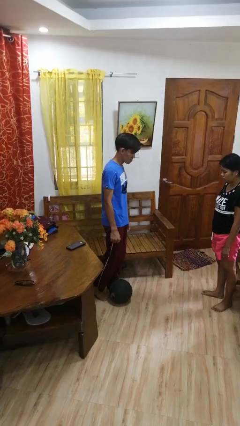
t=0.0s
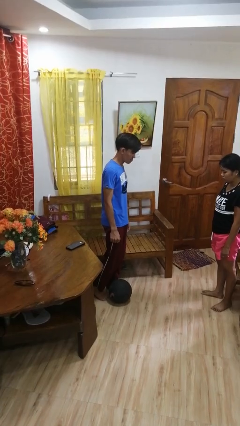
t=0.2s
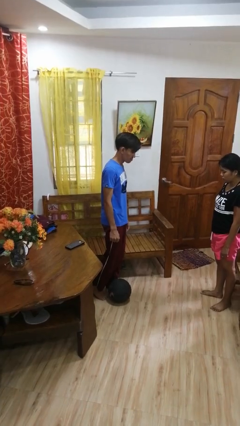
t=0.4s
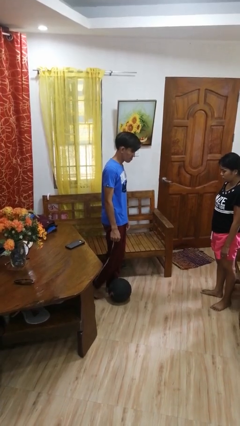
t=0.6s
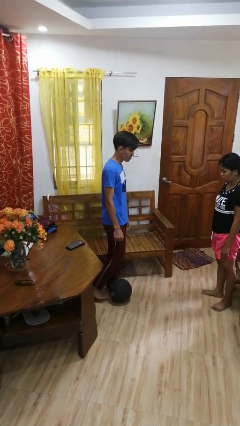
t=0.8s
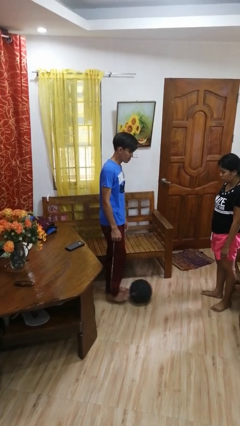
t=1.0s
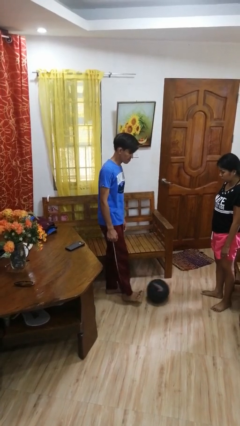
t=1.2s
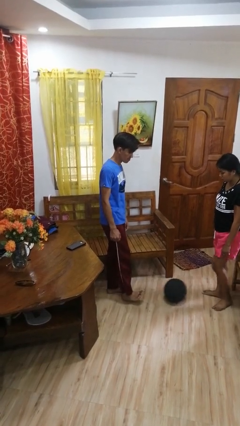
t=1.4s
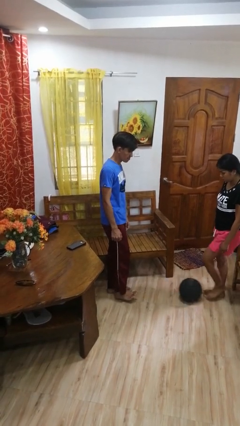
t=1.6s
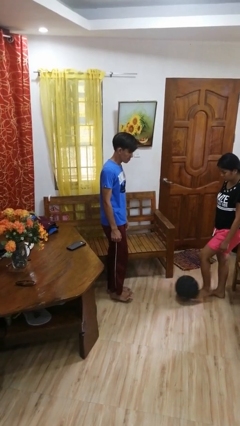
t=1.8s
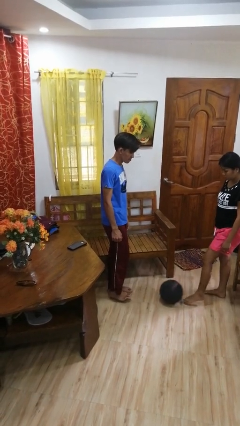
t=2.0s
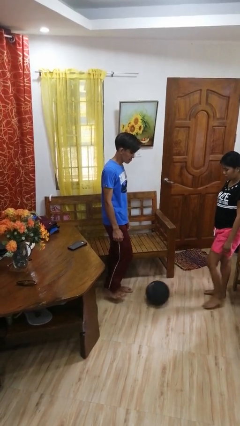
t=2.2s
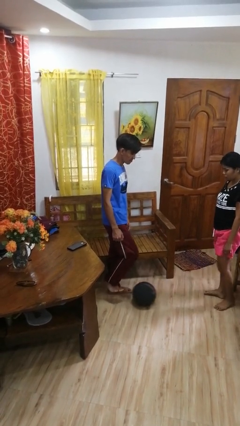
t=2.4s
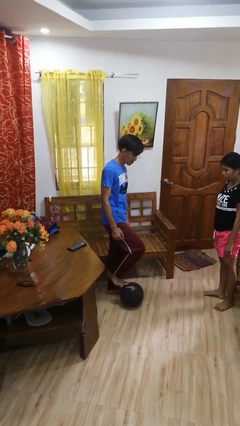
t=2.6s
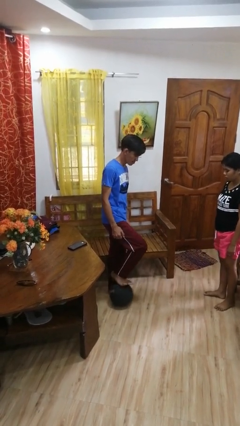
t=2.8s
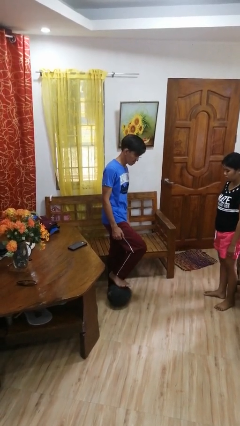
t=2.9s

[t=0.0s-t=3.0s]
person kicks object to person

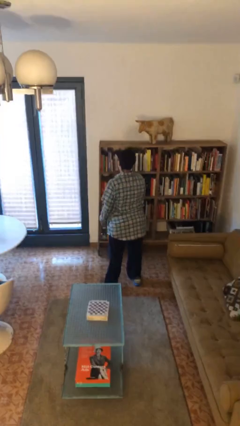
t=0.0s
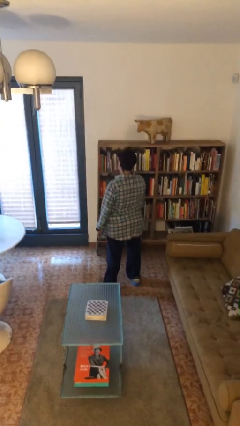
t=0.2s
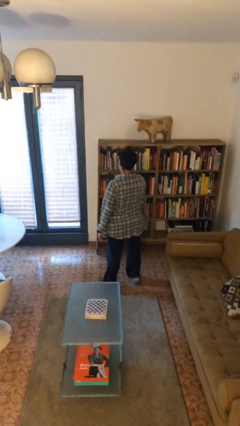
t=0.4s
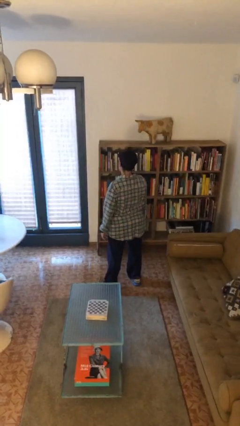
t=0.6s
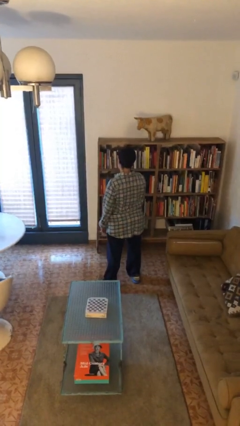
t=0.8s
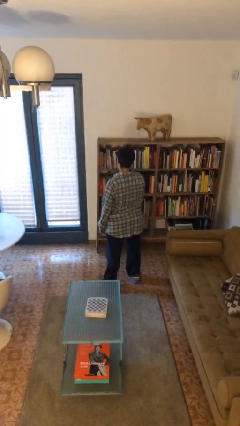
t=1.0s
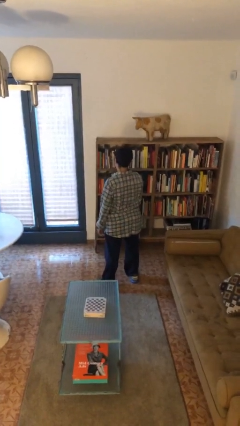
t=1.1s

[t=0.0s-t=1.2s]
person stands up

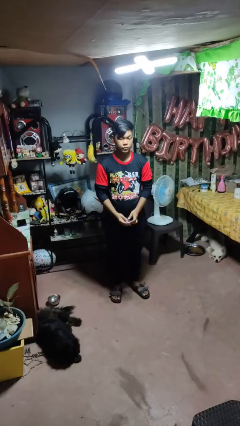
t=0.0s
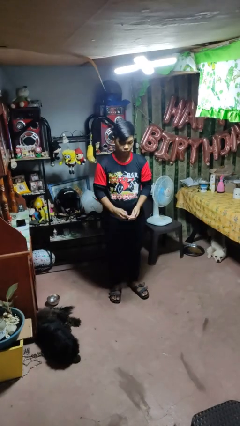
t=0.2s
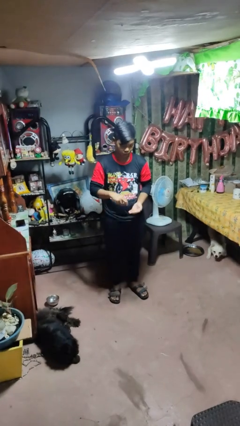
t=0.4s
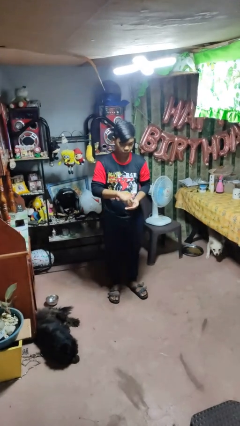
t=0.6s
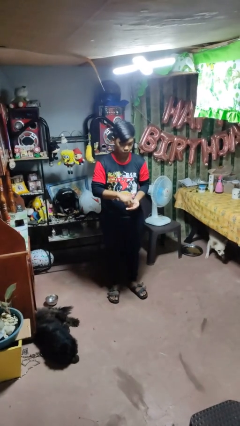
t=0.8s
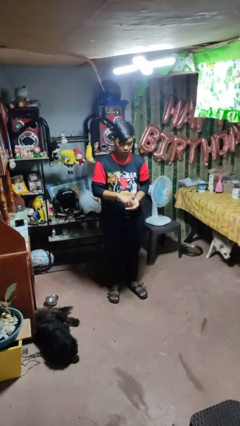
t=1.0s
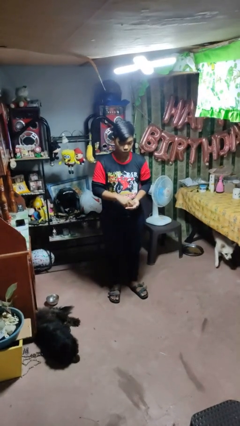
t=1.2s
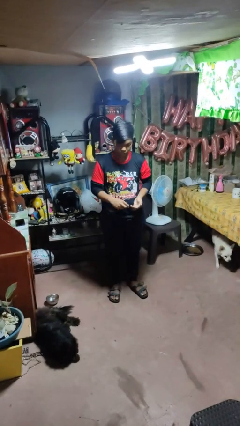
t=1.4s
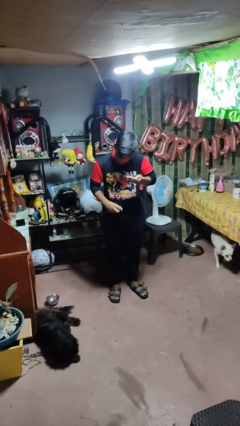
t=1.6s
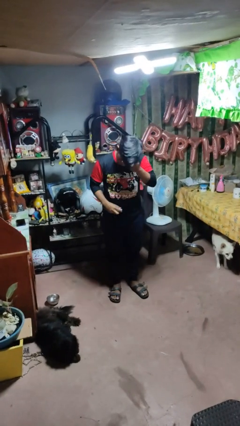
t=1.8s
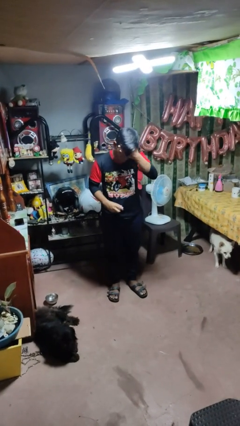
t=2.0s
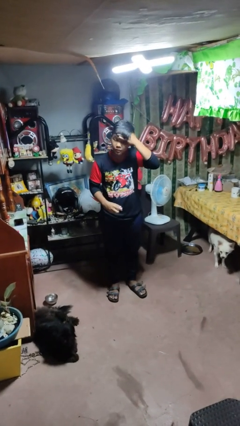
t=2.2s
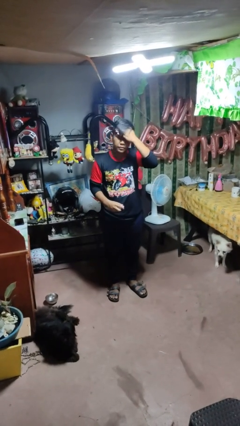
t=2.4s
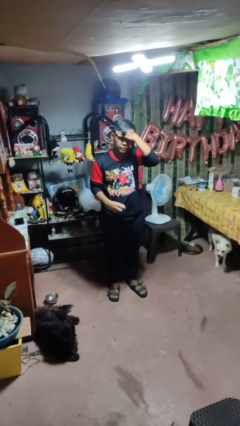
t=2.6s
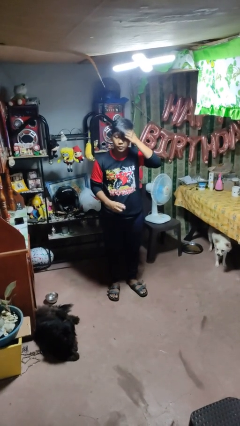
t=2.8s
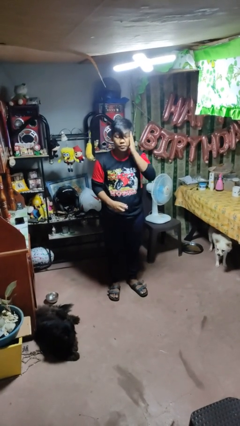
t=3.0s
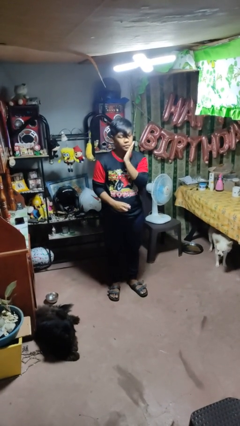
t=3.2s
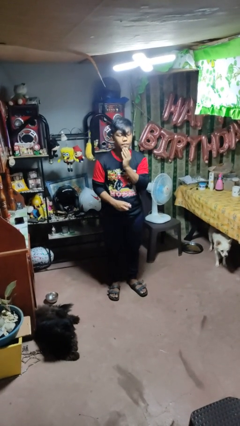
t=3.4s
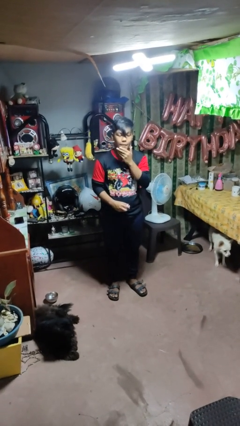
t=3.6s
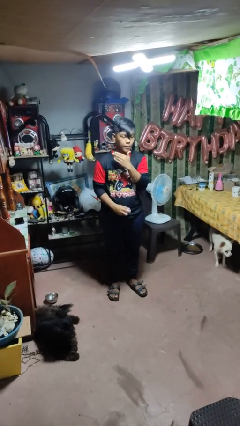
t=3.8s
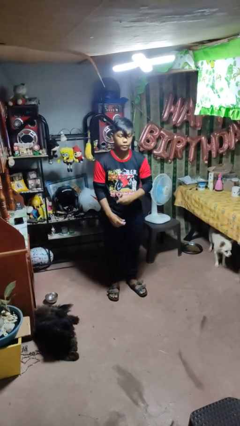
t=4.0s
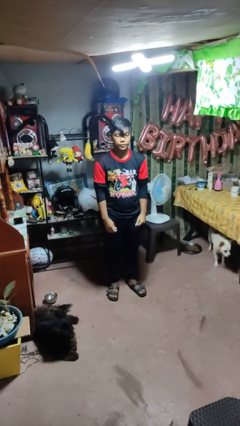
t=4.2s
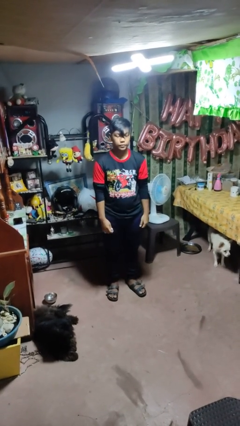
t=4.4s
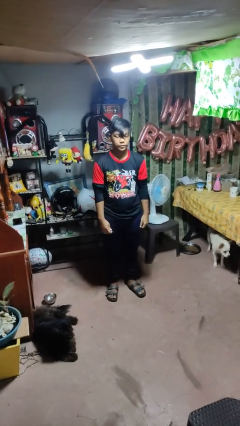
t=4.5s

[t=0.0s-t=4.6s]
person applies facial moisturizer

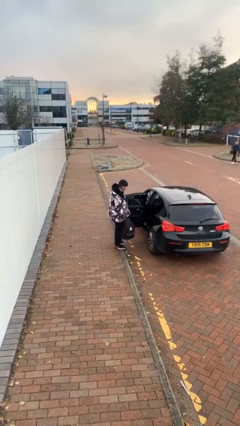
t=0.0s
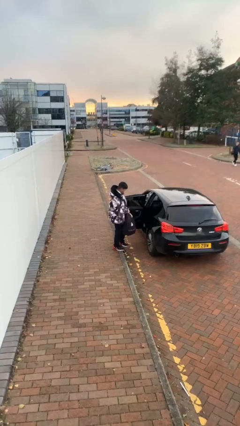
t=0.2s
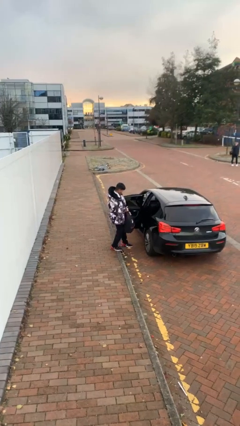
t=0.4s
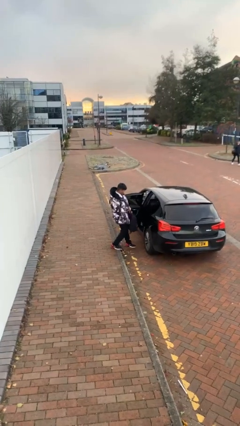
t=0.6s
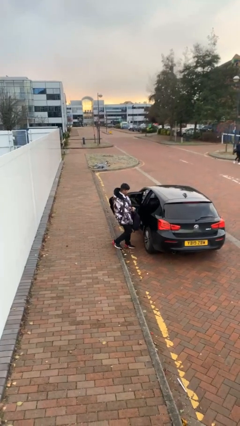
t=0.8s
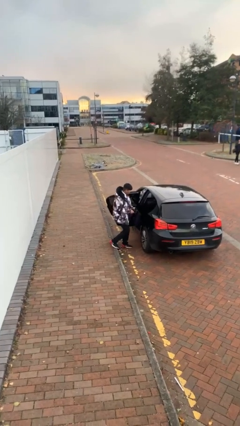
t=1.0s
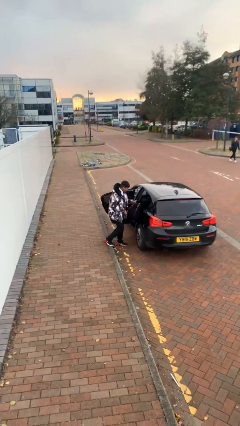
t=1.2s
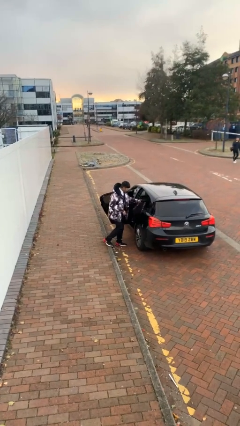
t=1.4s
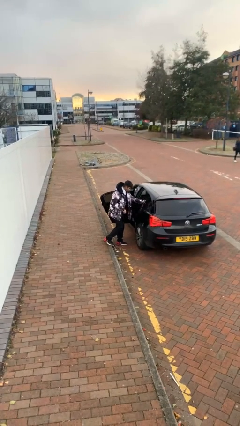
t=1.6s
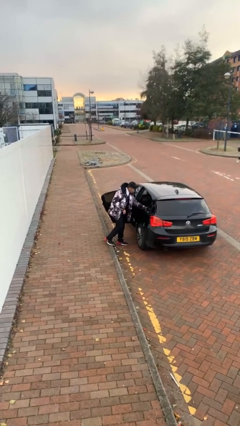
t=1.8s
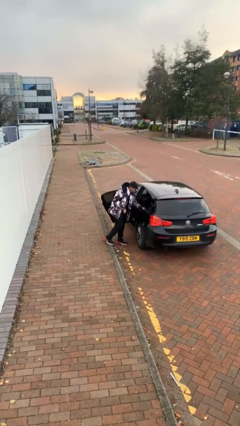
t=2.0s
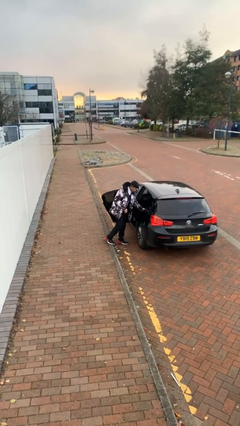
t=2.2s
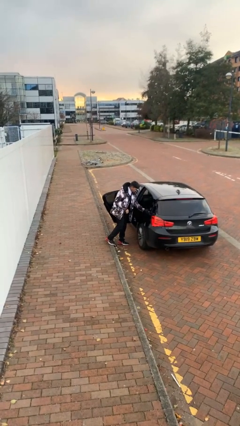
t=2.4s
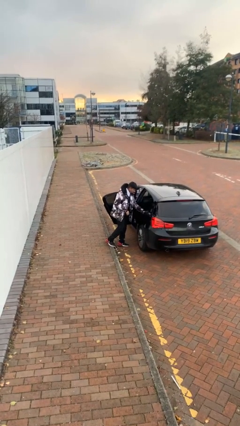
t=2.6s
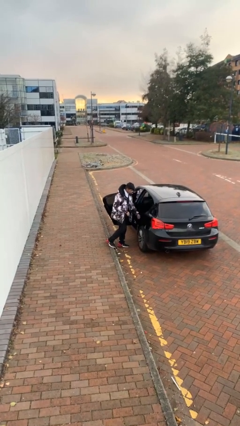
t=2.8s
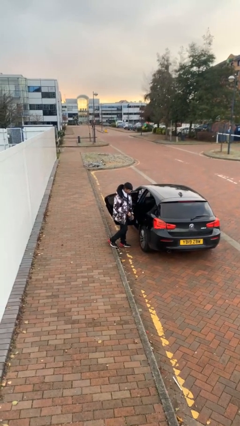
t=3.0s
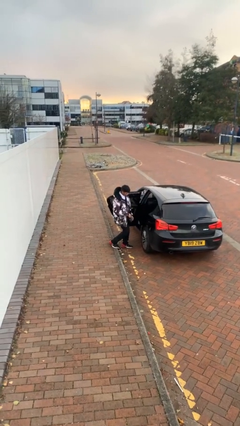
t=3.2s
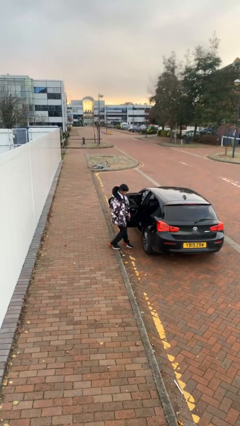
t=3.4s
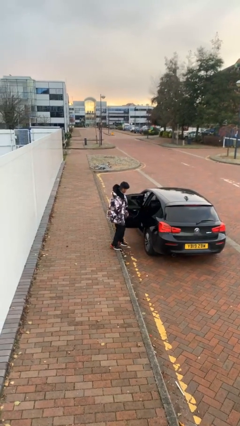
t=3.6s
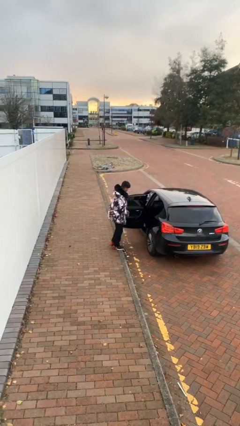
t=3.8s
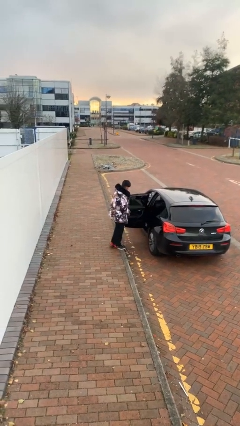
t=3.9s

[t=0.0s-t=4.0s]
person loads car

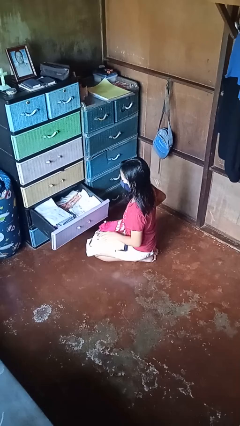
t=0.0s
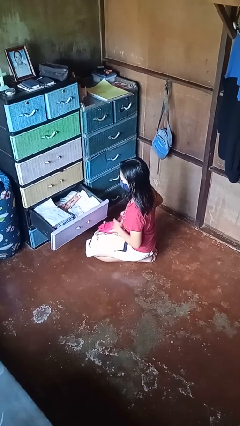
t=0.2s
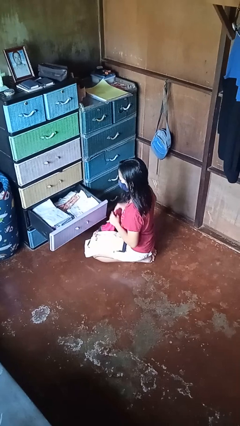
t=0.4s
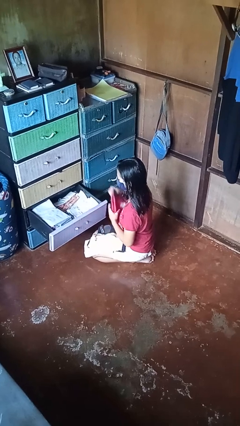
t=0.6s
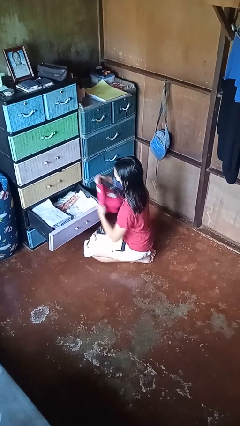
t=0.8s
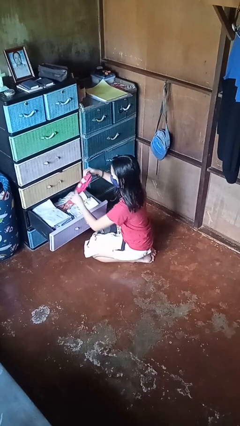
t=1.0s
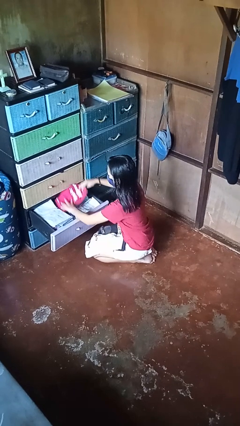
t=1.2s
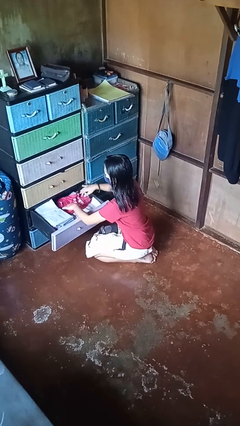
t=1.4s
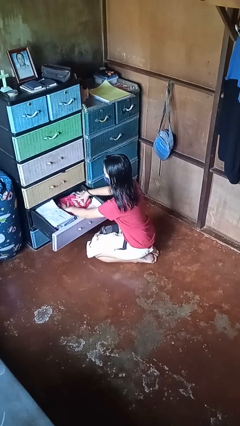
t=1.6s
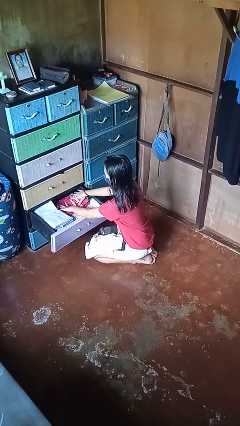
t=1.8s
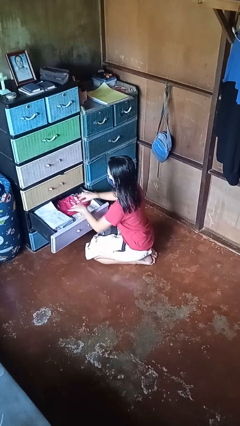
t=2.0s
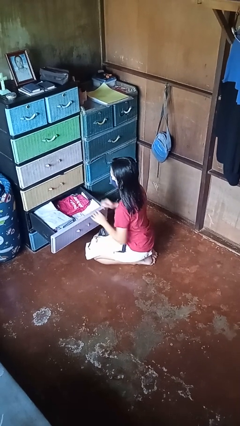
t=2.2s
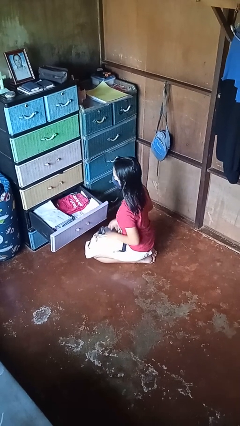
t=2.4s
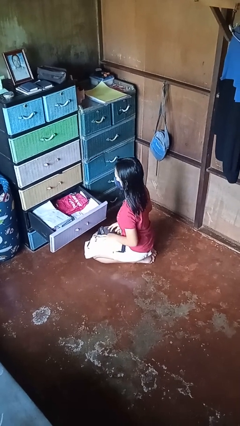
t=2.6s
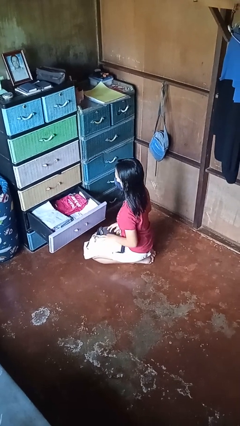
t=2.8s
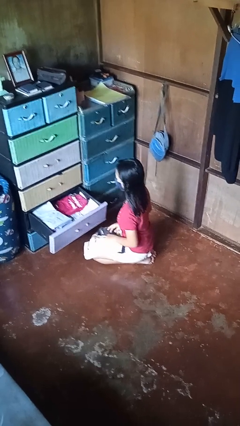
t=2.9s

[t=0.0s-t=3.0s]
person puts clothes into dresser

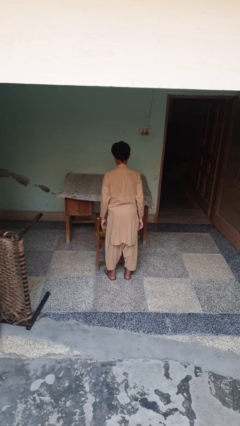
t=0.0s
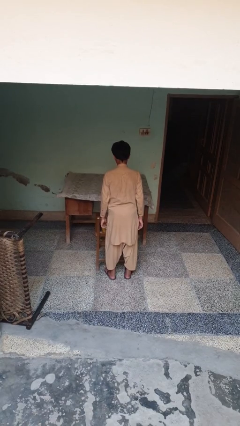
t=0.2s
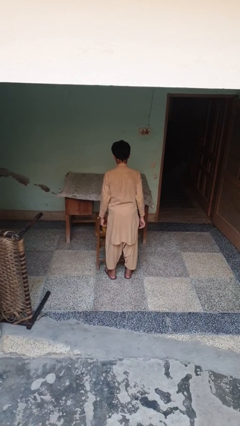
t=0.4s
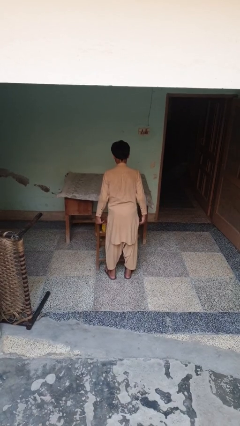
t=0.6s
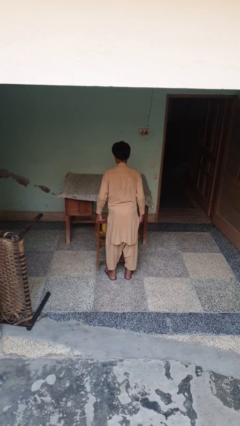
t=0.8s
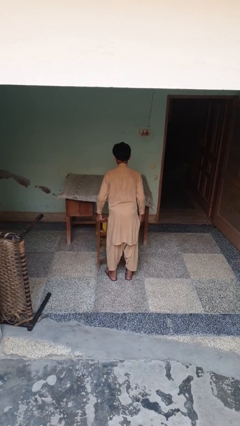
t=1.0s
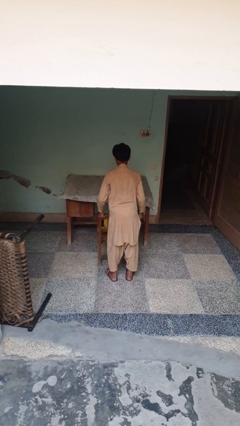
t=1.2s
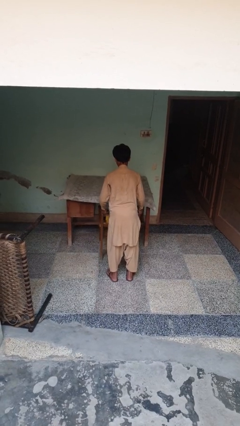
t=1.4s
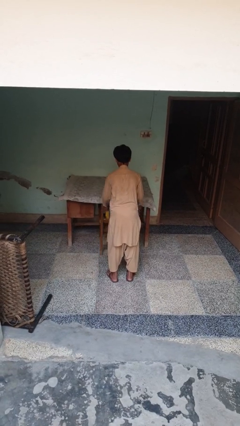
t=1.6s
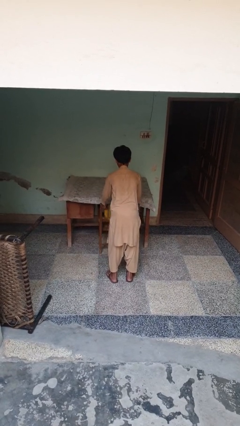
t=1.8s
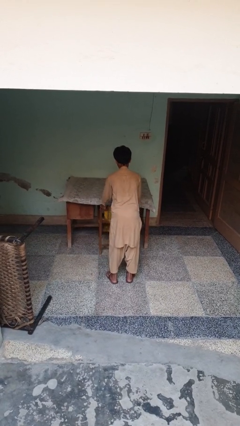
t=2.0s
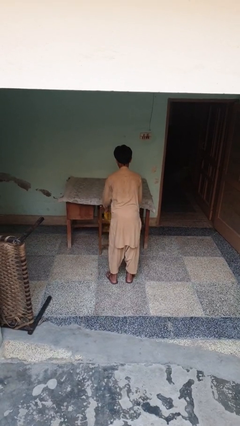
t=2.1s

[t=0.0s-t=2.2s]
person pushes in chair
